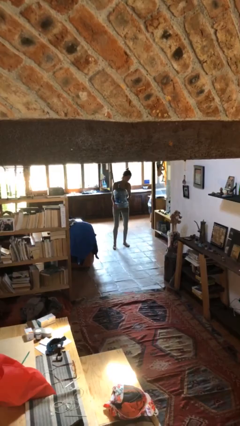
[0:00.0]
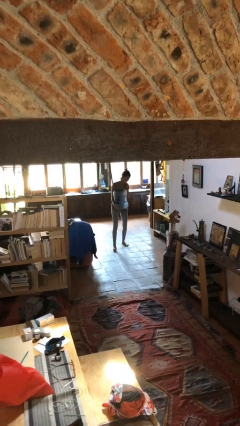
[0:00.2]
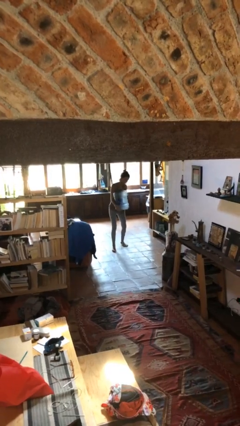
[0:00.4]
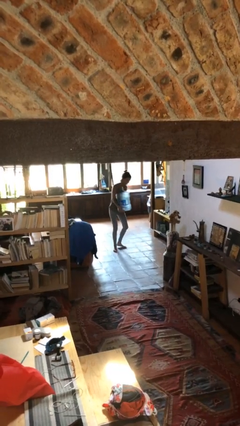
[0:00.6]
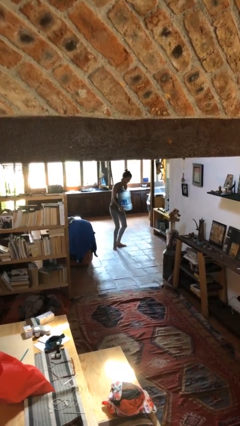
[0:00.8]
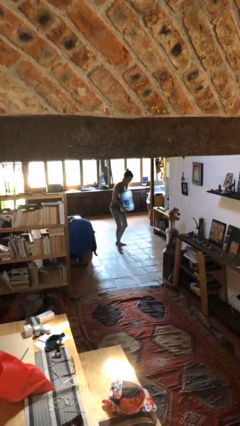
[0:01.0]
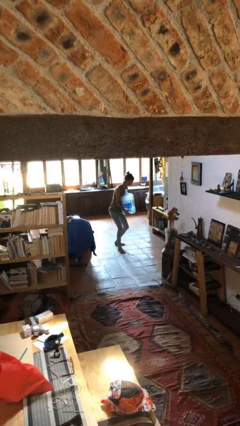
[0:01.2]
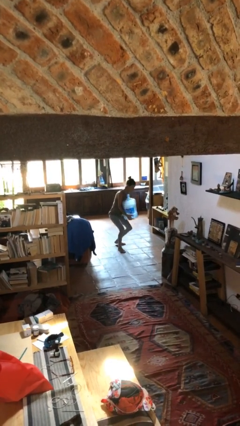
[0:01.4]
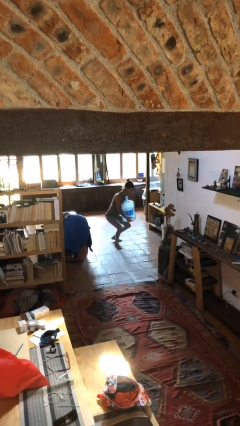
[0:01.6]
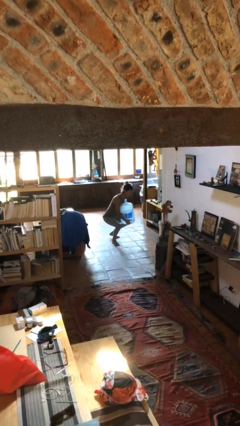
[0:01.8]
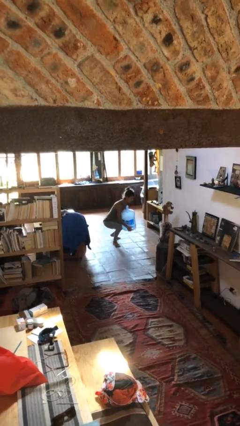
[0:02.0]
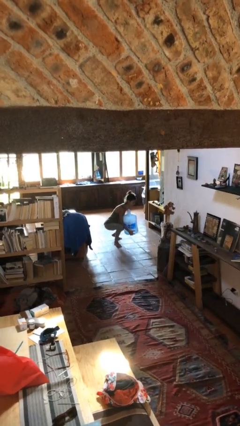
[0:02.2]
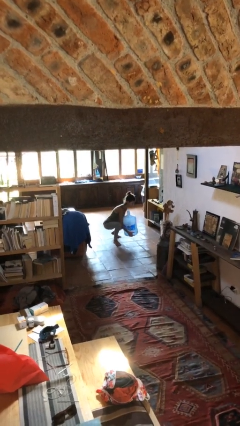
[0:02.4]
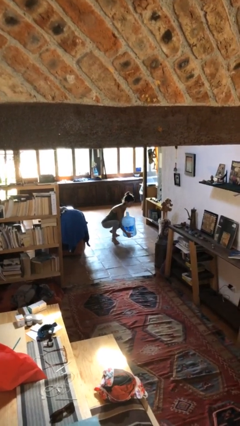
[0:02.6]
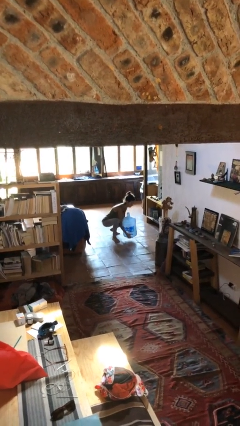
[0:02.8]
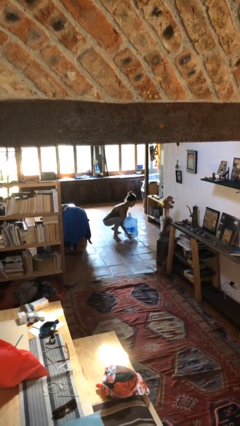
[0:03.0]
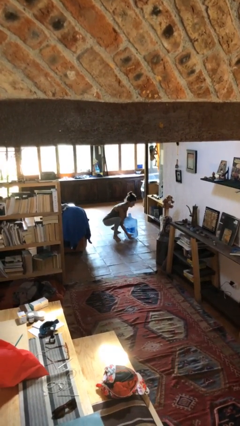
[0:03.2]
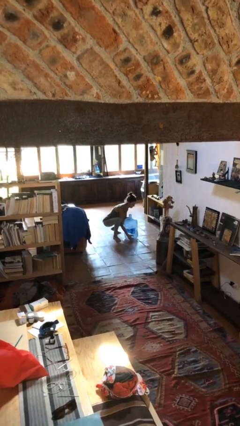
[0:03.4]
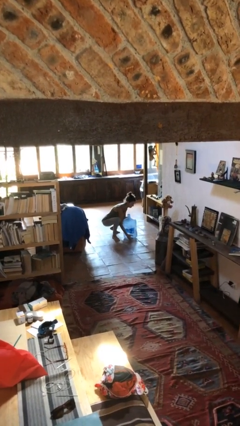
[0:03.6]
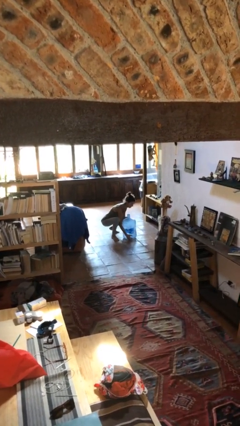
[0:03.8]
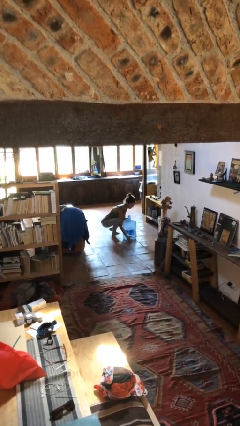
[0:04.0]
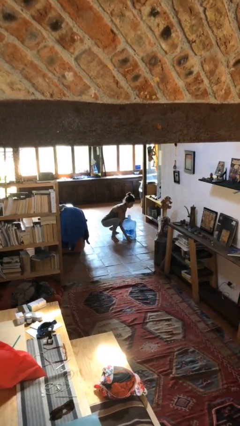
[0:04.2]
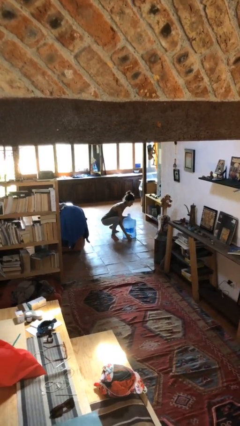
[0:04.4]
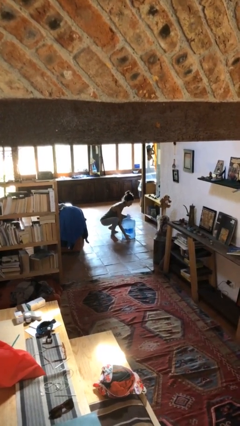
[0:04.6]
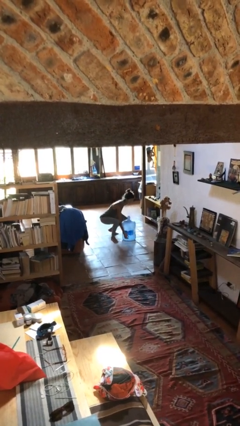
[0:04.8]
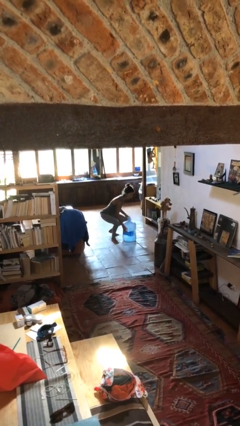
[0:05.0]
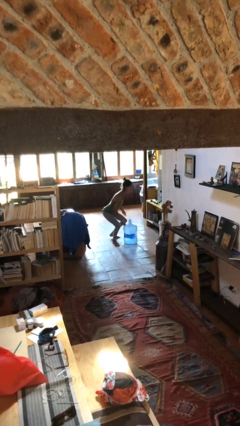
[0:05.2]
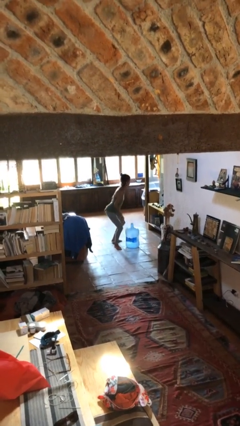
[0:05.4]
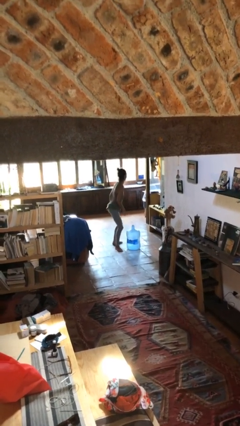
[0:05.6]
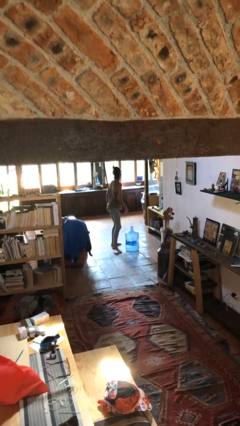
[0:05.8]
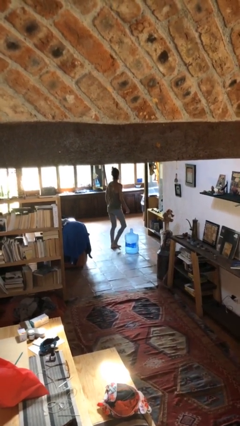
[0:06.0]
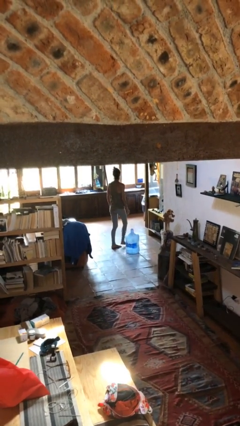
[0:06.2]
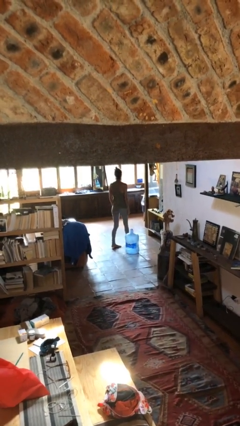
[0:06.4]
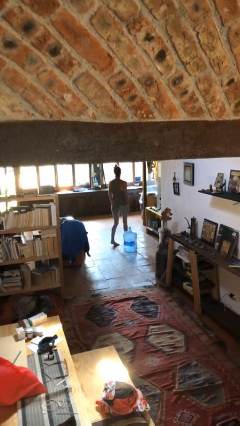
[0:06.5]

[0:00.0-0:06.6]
person puts down object on floor

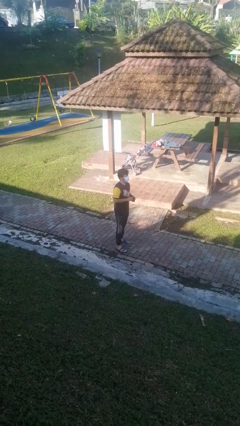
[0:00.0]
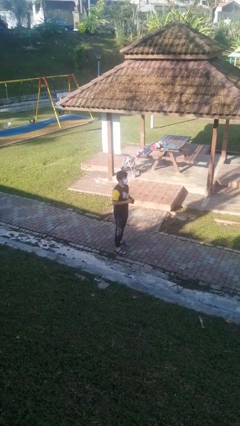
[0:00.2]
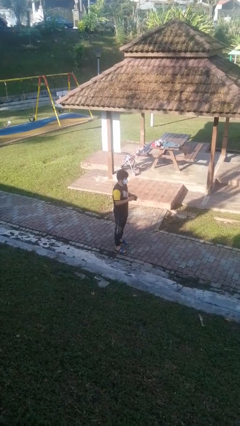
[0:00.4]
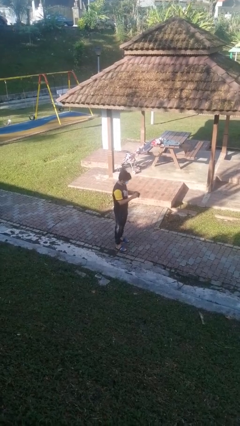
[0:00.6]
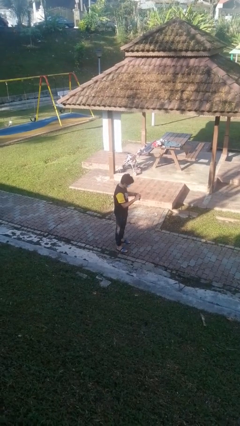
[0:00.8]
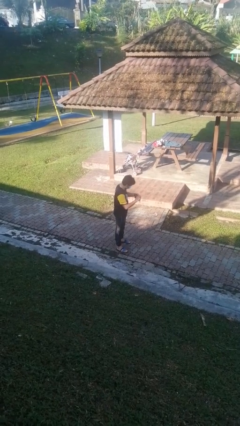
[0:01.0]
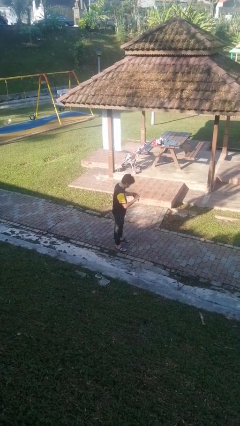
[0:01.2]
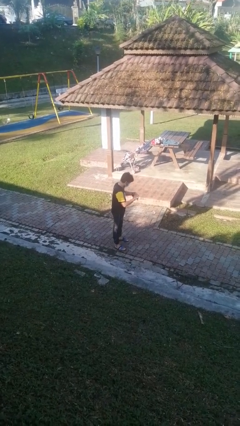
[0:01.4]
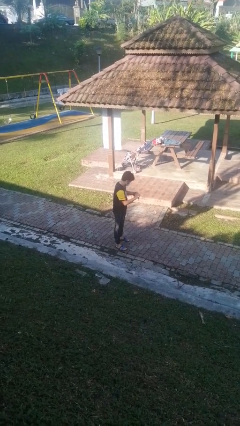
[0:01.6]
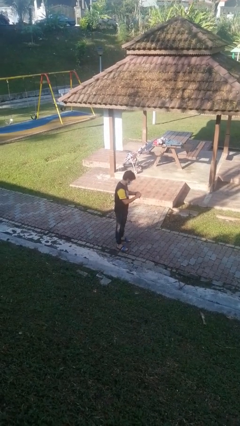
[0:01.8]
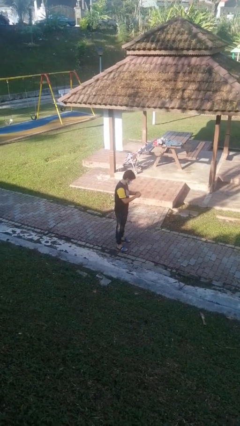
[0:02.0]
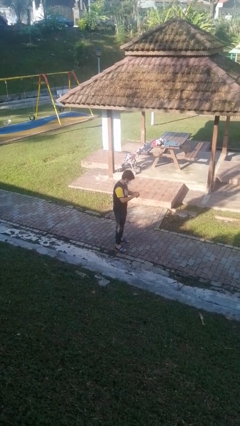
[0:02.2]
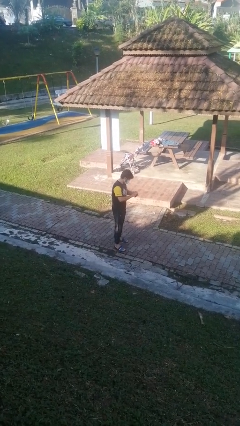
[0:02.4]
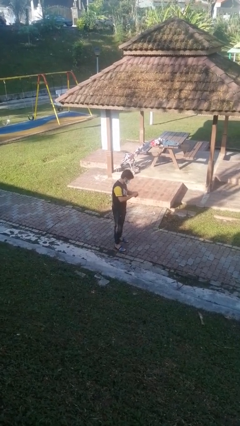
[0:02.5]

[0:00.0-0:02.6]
person searches in purse

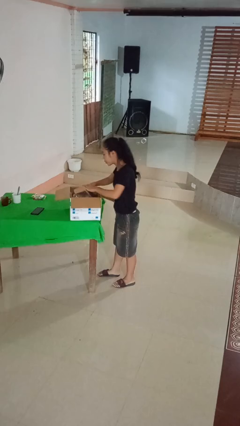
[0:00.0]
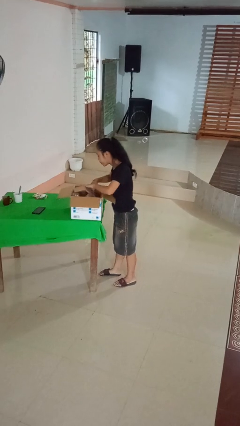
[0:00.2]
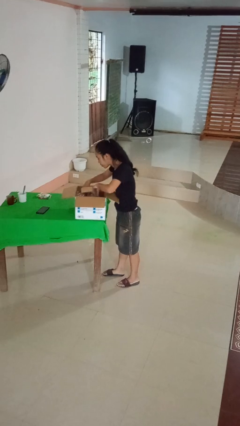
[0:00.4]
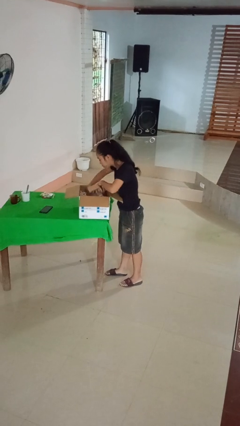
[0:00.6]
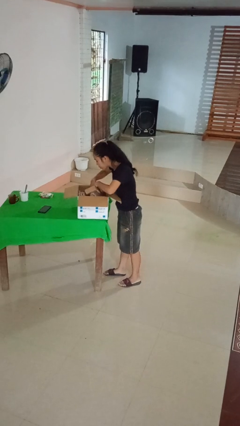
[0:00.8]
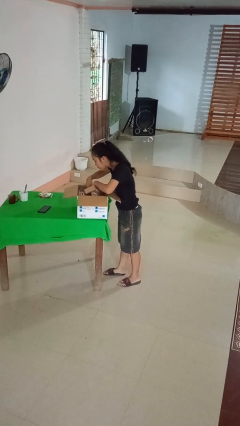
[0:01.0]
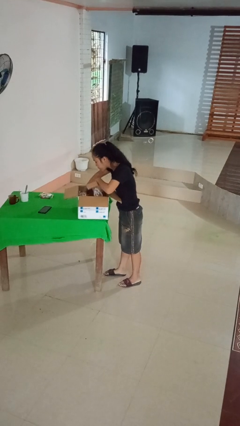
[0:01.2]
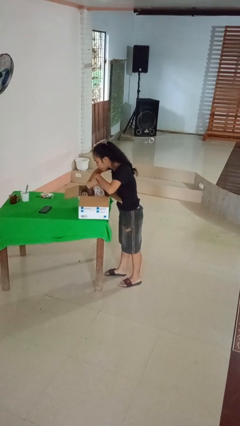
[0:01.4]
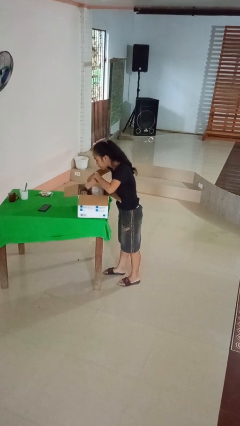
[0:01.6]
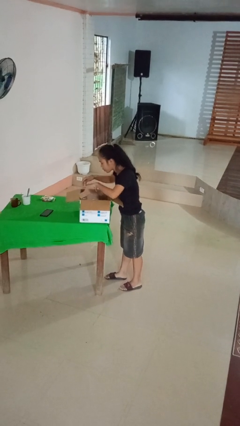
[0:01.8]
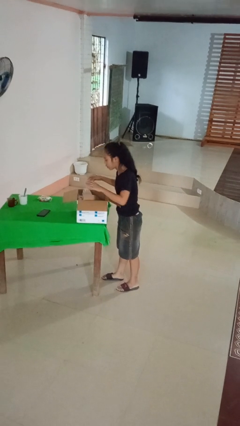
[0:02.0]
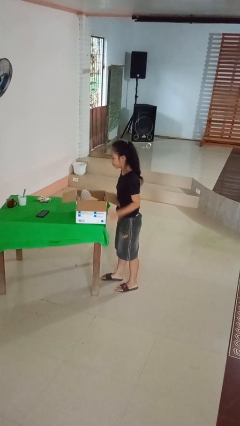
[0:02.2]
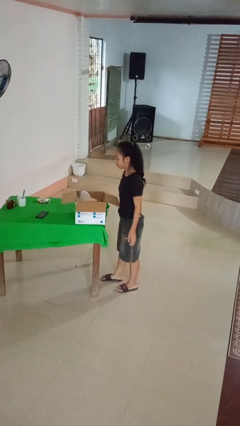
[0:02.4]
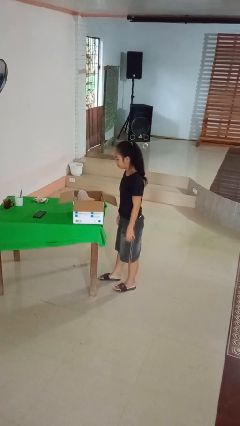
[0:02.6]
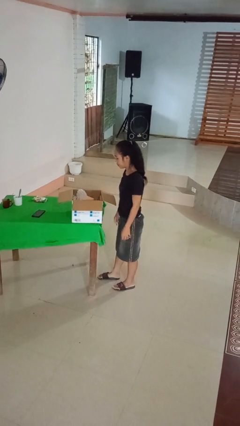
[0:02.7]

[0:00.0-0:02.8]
person searches in box

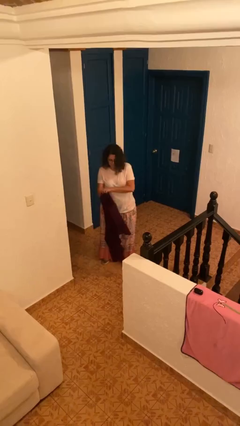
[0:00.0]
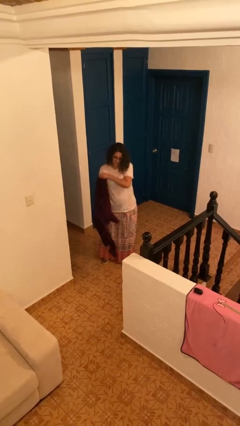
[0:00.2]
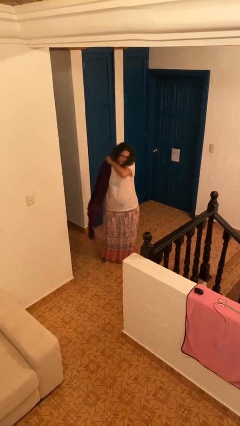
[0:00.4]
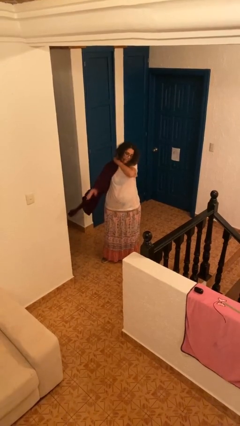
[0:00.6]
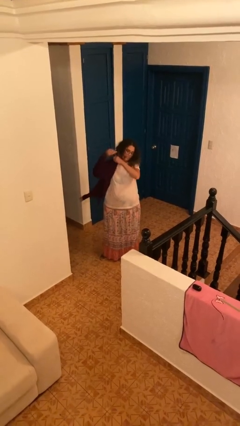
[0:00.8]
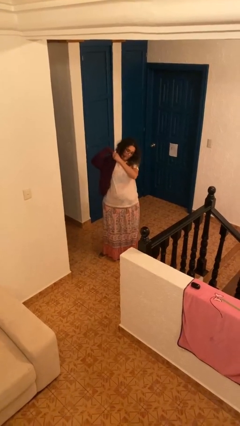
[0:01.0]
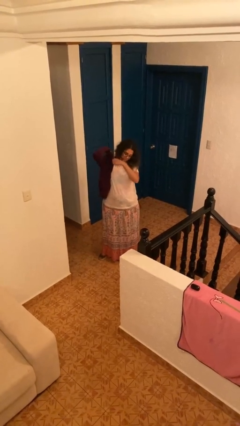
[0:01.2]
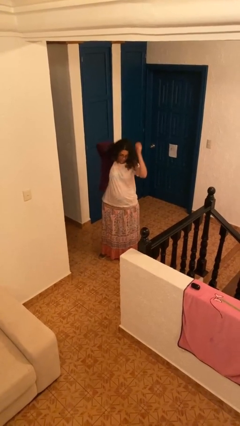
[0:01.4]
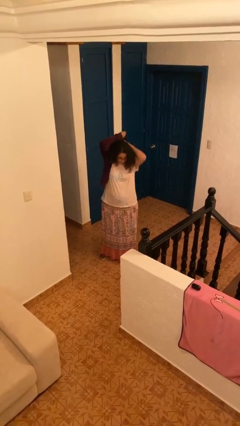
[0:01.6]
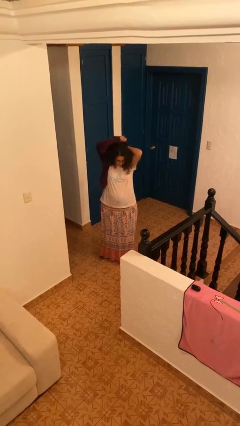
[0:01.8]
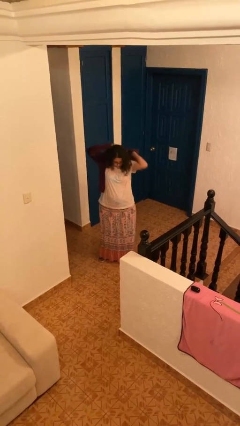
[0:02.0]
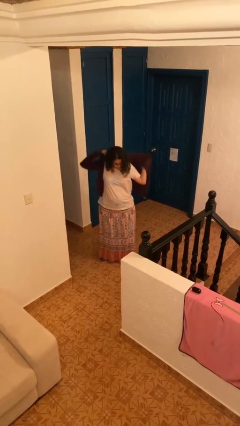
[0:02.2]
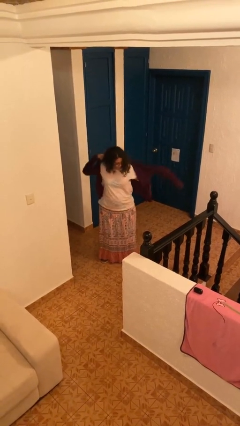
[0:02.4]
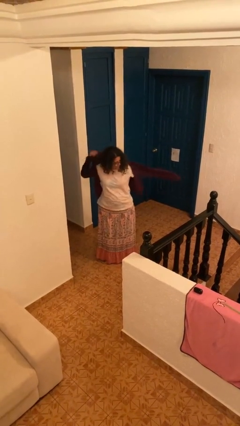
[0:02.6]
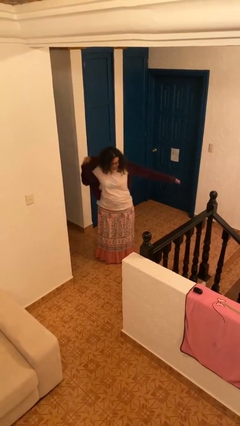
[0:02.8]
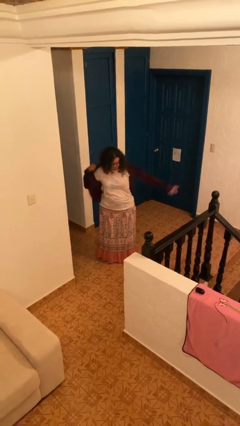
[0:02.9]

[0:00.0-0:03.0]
person puts on jacket

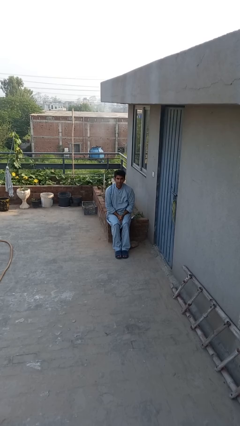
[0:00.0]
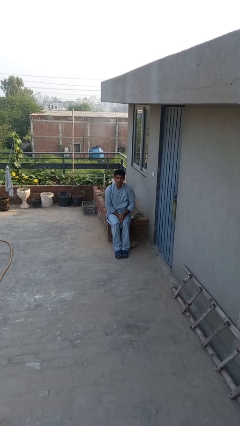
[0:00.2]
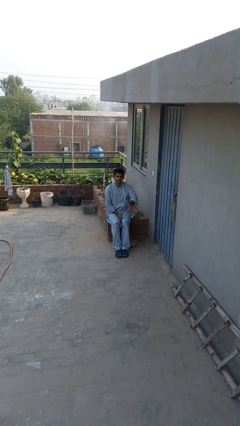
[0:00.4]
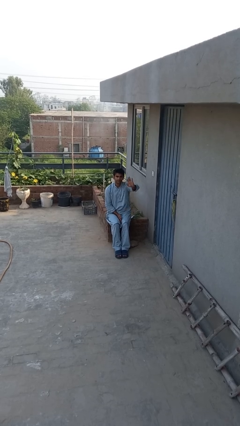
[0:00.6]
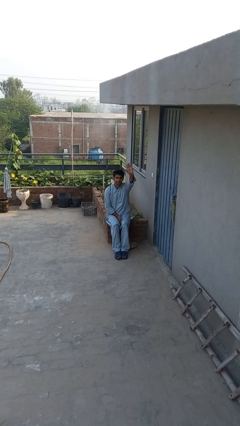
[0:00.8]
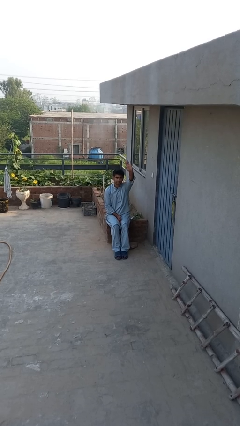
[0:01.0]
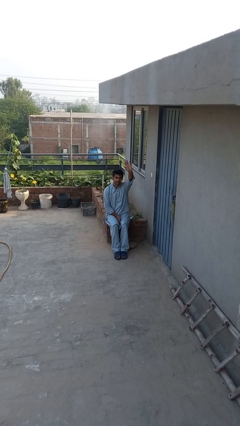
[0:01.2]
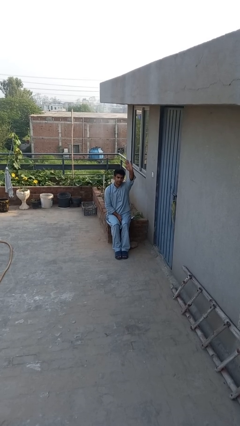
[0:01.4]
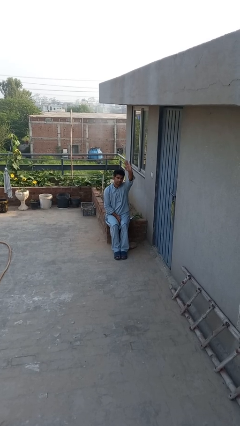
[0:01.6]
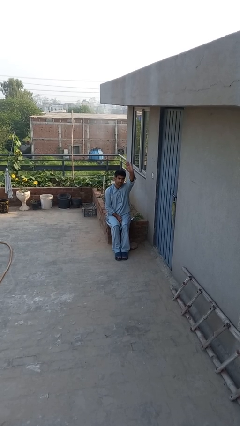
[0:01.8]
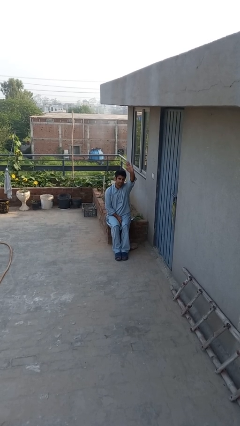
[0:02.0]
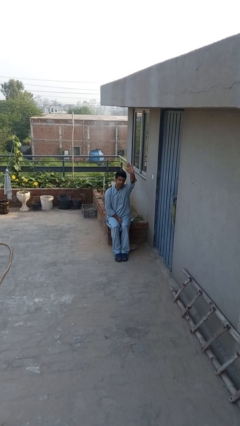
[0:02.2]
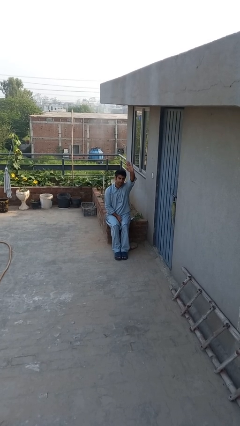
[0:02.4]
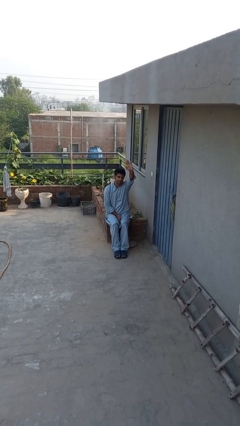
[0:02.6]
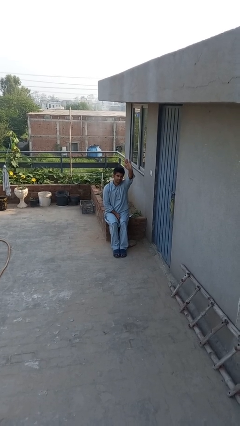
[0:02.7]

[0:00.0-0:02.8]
person gestures raise hand
